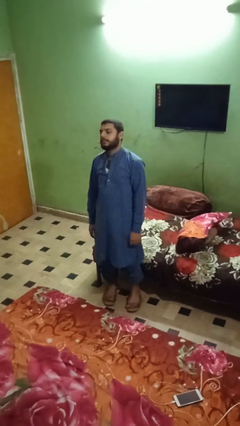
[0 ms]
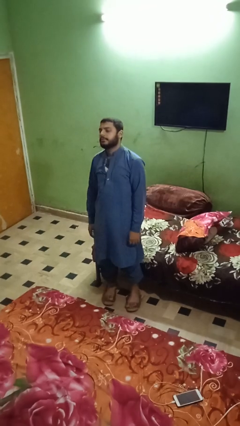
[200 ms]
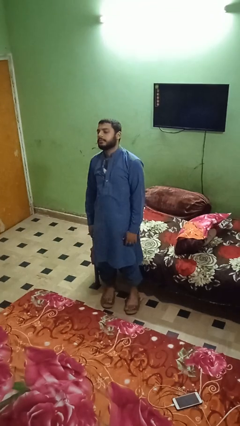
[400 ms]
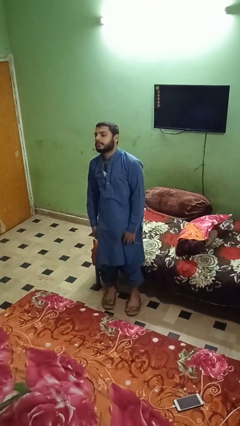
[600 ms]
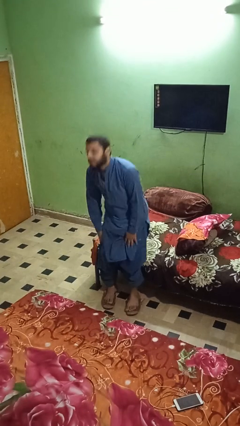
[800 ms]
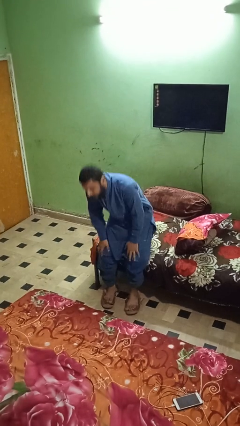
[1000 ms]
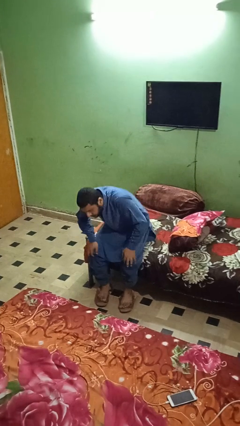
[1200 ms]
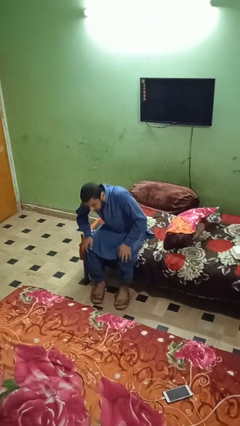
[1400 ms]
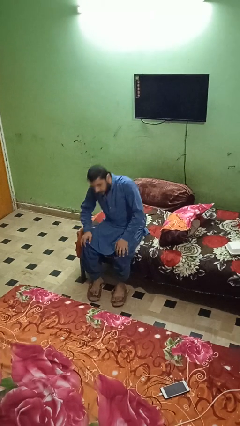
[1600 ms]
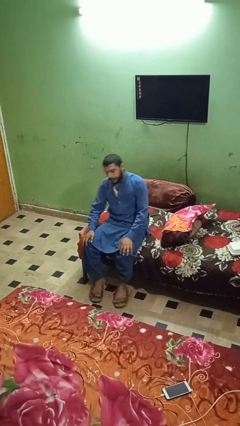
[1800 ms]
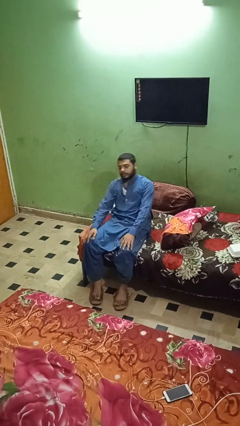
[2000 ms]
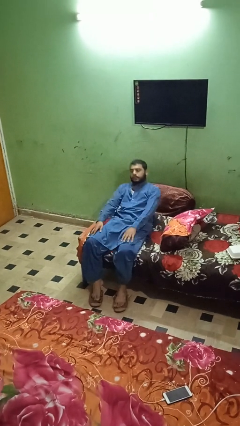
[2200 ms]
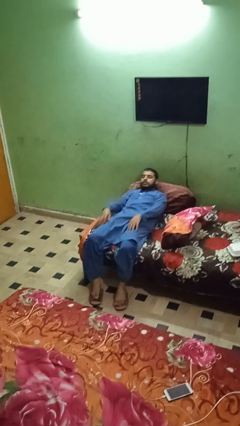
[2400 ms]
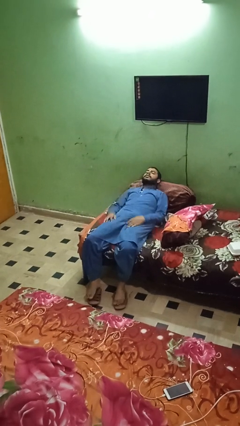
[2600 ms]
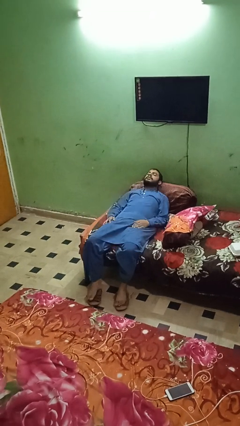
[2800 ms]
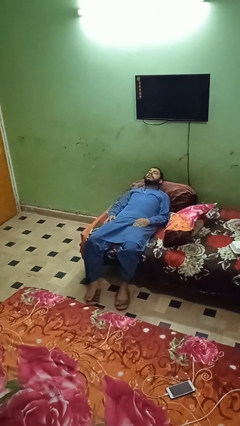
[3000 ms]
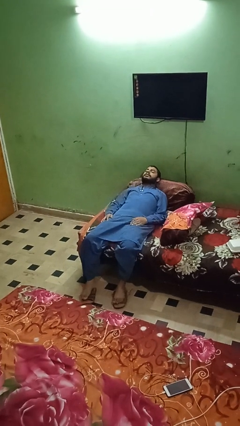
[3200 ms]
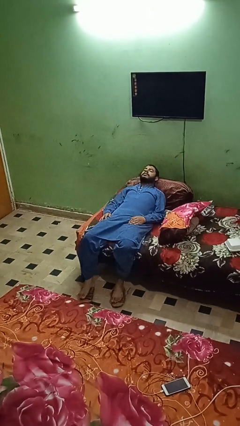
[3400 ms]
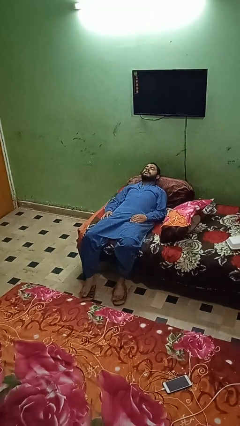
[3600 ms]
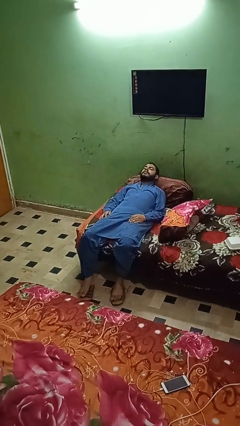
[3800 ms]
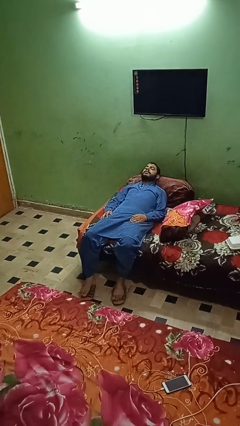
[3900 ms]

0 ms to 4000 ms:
person lies down on couch

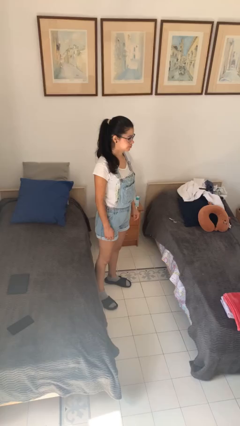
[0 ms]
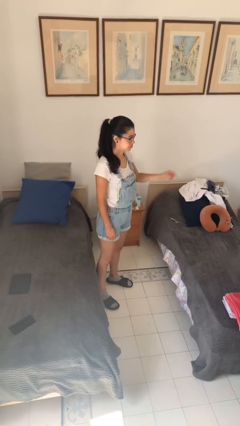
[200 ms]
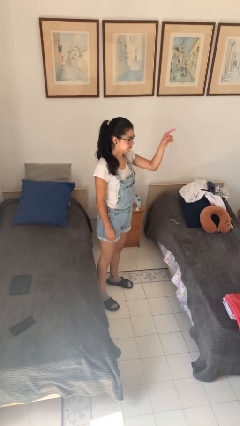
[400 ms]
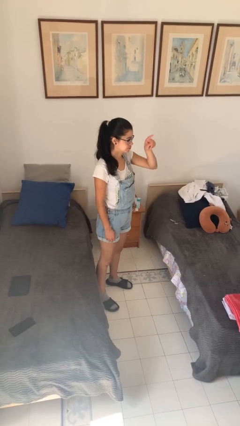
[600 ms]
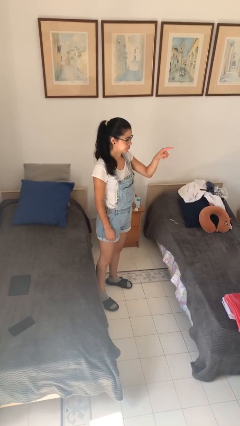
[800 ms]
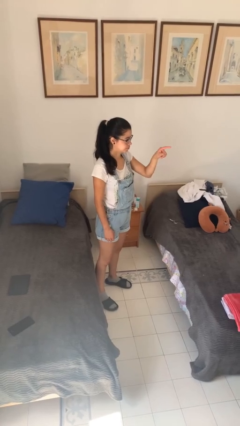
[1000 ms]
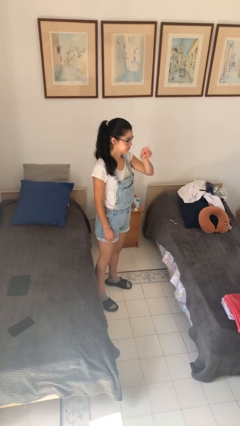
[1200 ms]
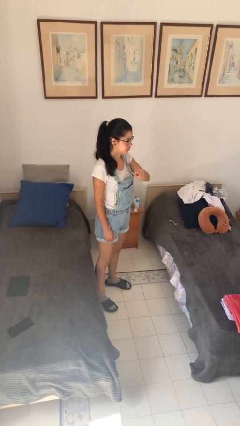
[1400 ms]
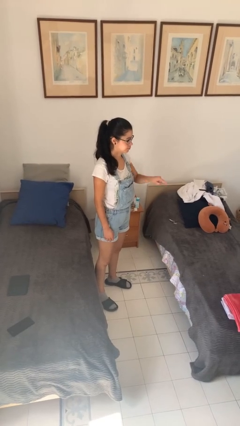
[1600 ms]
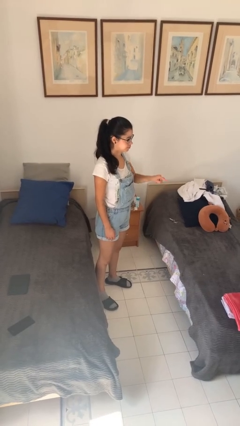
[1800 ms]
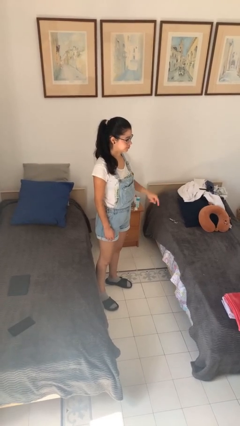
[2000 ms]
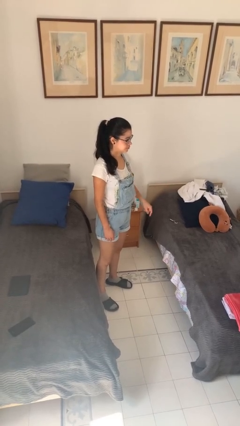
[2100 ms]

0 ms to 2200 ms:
person gestures number three

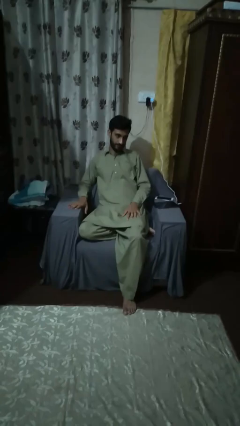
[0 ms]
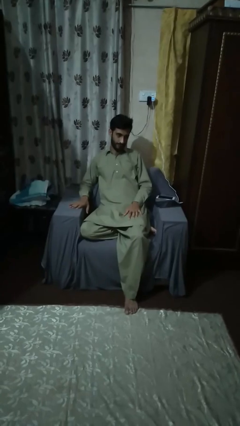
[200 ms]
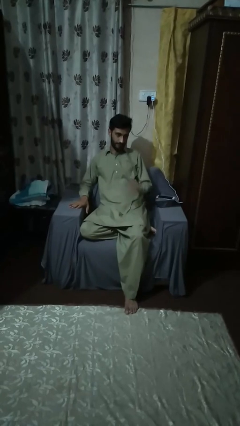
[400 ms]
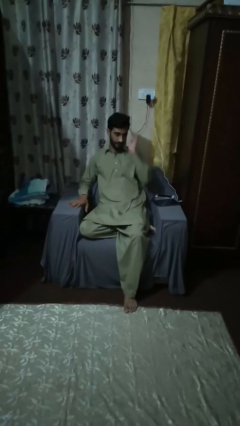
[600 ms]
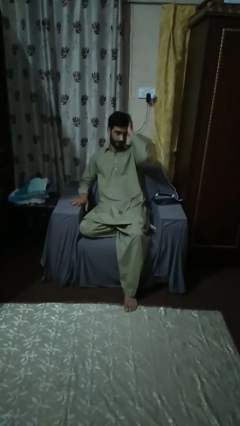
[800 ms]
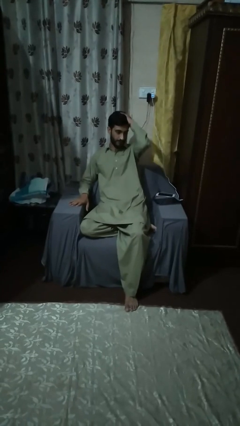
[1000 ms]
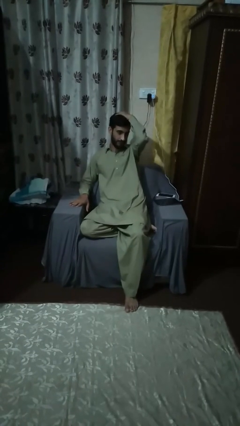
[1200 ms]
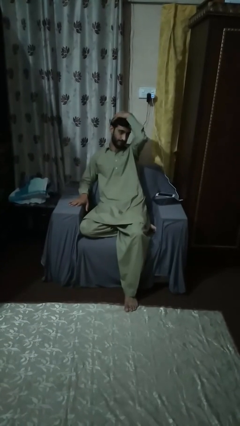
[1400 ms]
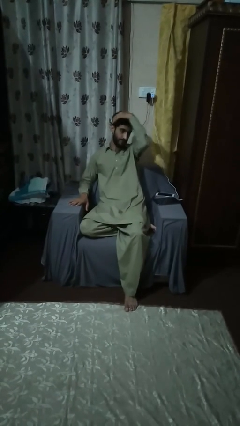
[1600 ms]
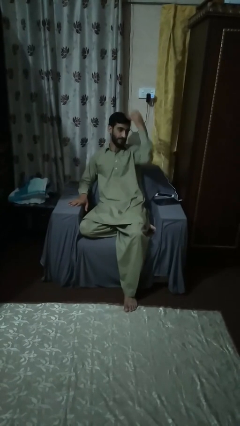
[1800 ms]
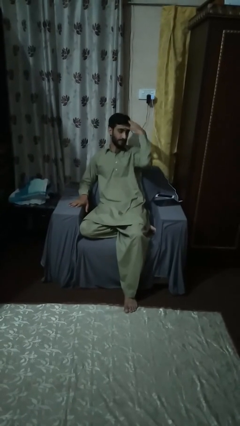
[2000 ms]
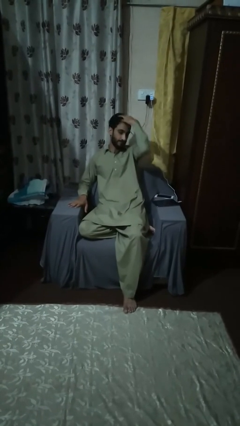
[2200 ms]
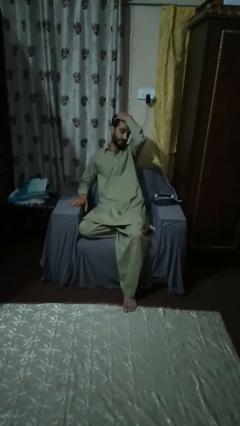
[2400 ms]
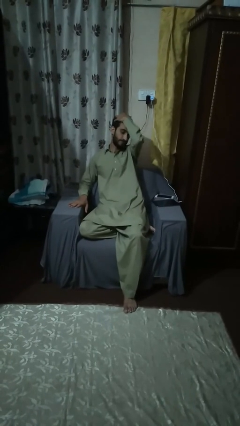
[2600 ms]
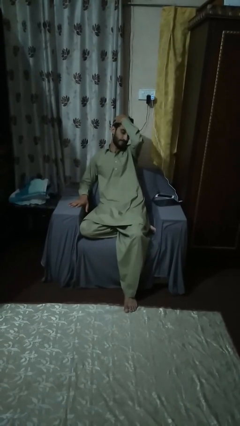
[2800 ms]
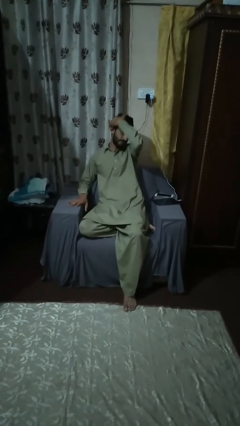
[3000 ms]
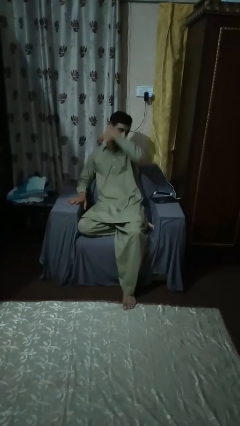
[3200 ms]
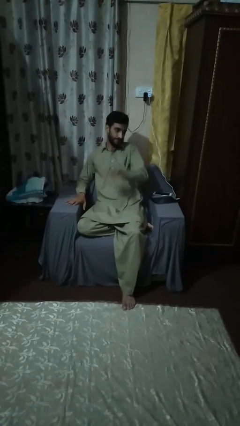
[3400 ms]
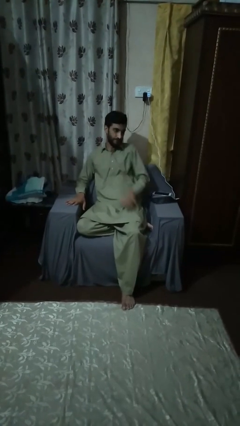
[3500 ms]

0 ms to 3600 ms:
person strokes hair

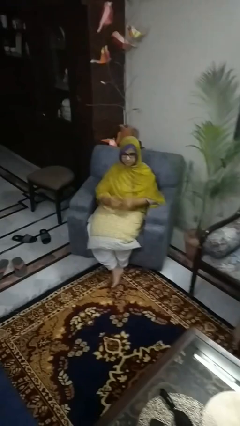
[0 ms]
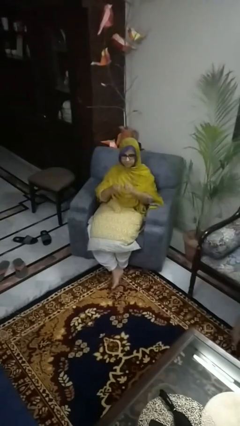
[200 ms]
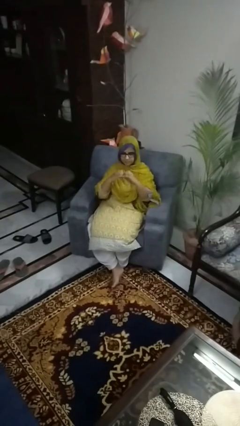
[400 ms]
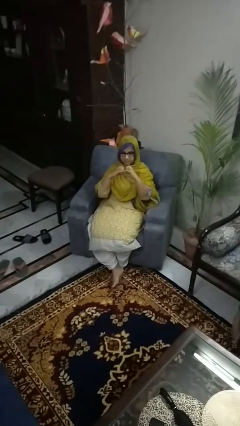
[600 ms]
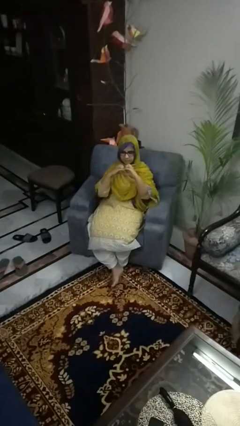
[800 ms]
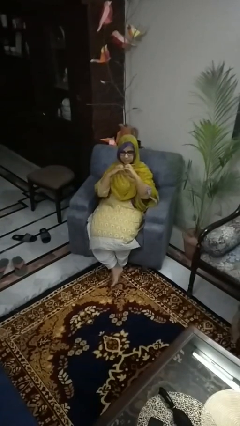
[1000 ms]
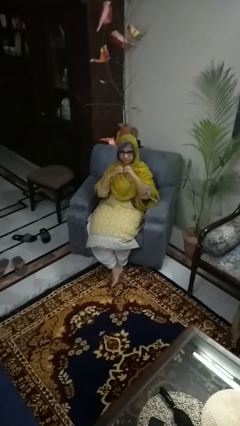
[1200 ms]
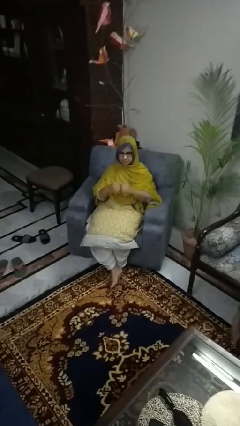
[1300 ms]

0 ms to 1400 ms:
person gestures heart

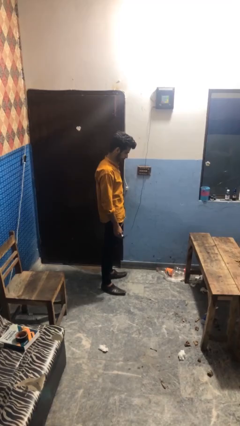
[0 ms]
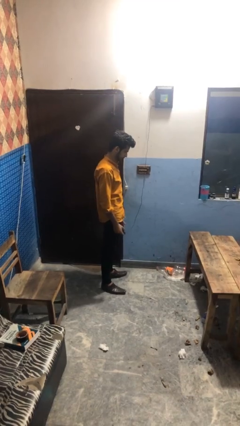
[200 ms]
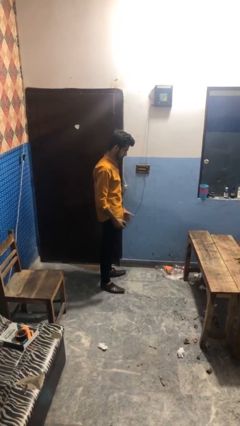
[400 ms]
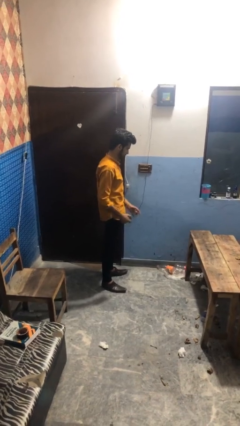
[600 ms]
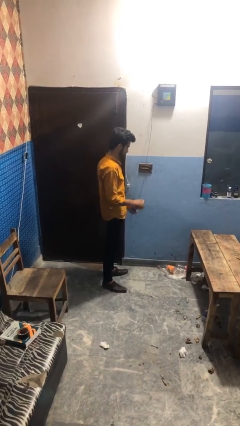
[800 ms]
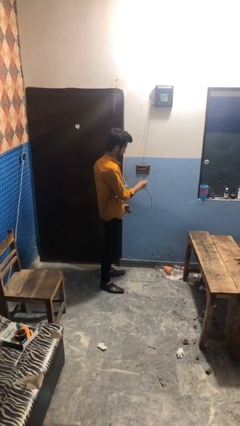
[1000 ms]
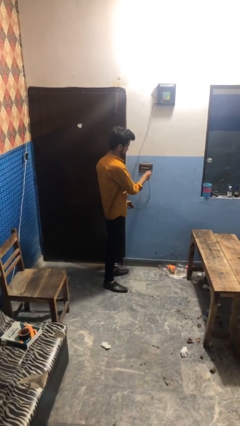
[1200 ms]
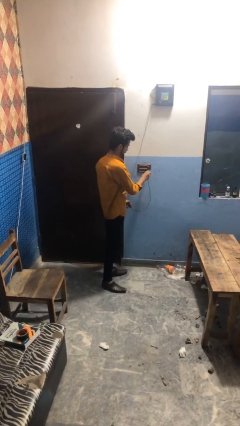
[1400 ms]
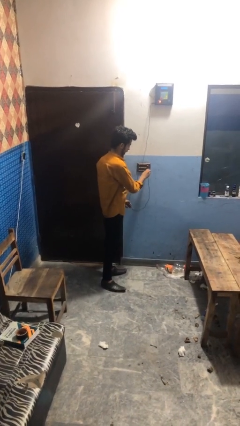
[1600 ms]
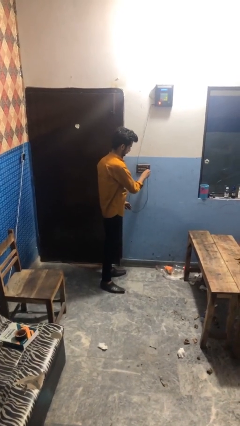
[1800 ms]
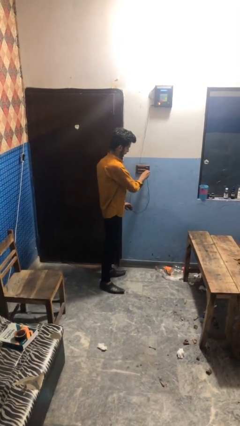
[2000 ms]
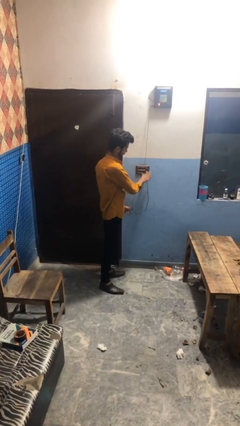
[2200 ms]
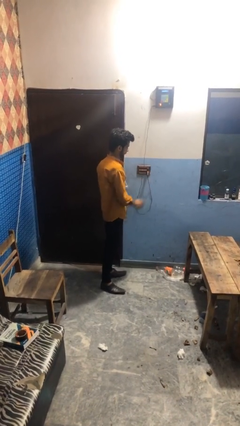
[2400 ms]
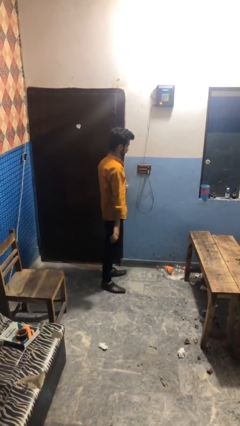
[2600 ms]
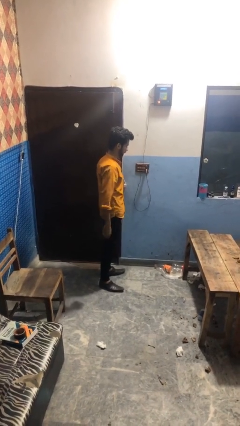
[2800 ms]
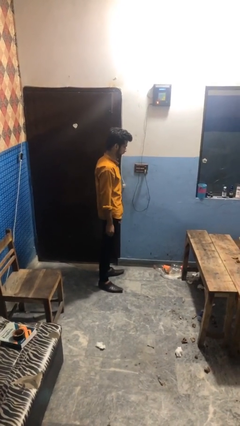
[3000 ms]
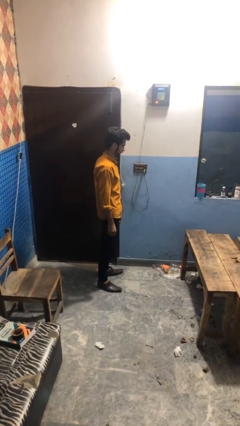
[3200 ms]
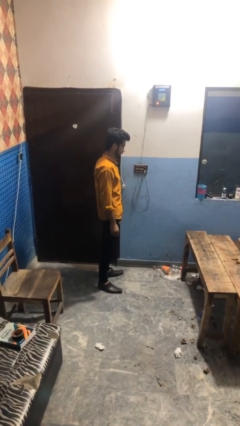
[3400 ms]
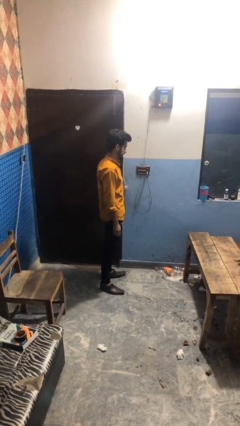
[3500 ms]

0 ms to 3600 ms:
person plugs into electrical socket

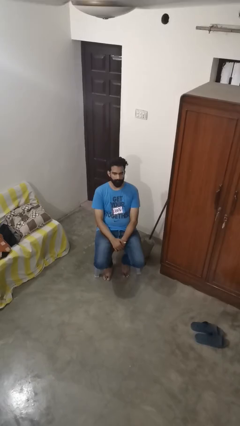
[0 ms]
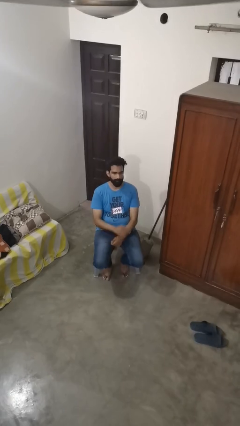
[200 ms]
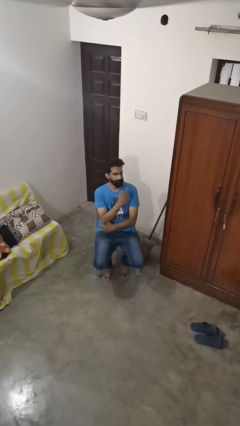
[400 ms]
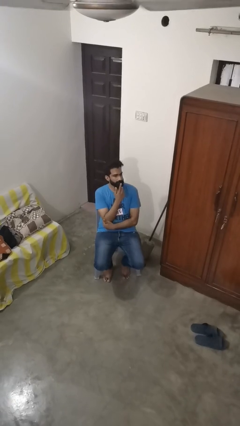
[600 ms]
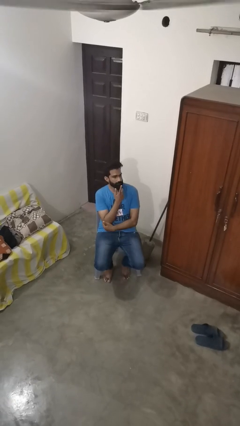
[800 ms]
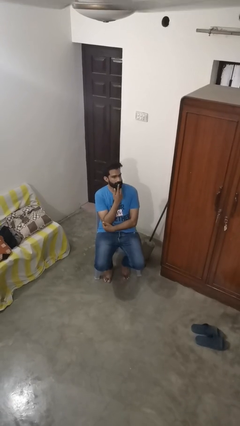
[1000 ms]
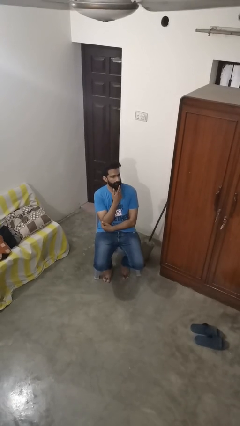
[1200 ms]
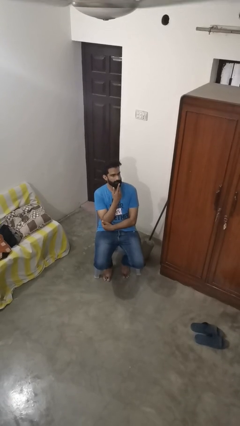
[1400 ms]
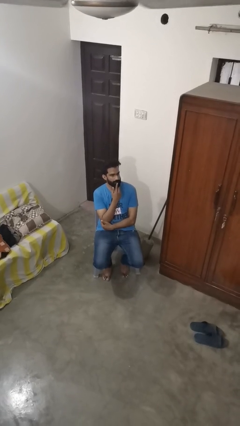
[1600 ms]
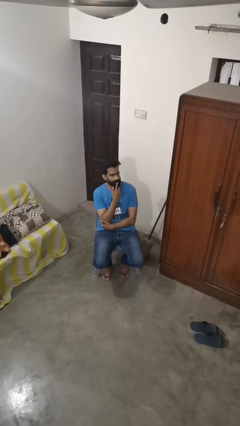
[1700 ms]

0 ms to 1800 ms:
person strokes chin

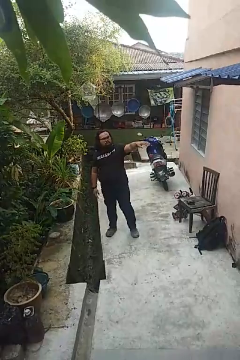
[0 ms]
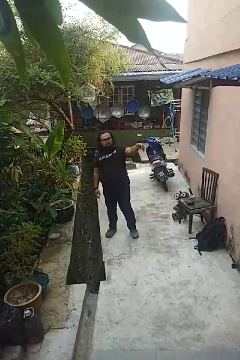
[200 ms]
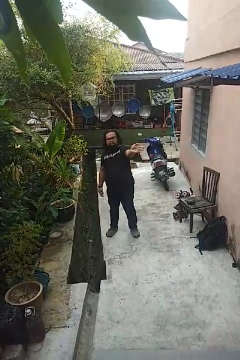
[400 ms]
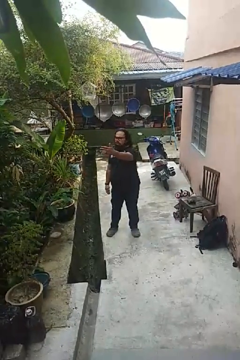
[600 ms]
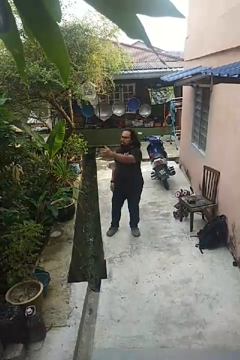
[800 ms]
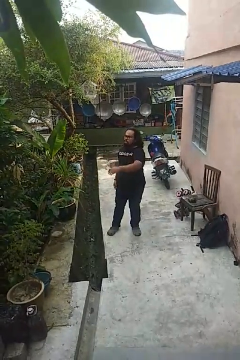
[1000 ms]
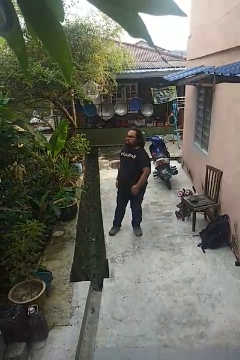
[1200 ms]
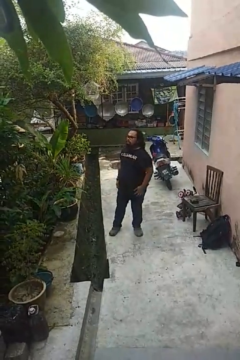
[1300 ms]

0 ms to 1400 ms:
person gestures swipe right
